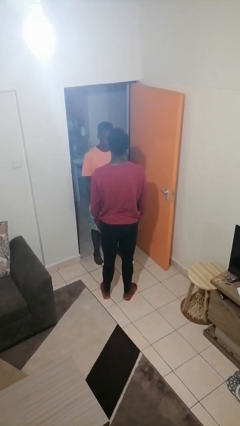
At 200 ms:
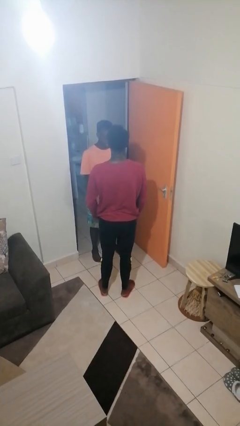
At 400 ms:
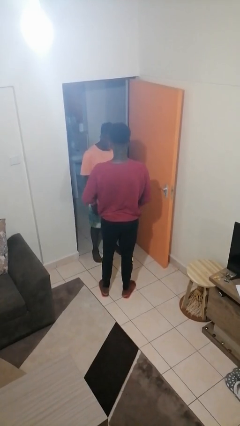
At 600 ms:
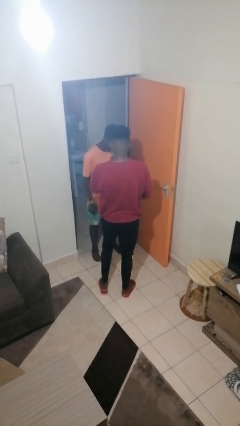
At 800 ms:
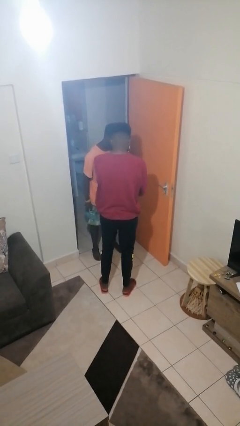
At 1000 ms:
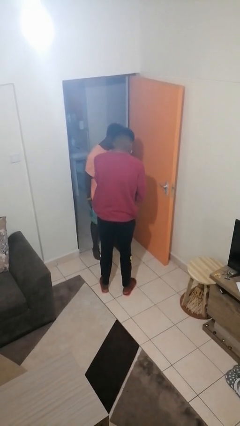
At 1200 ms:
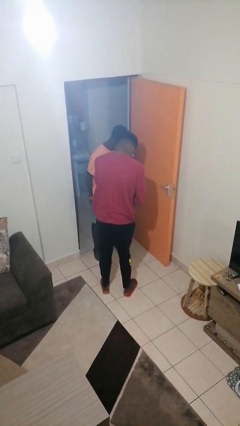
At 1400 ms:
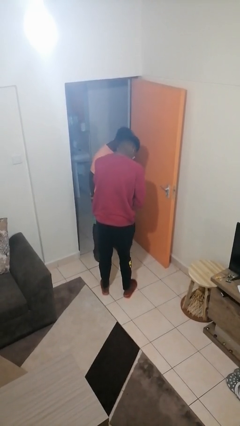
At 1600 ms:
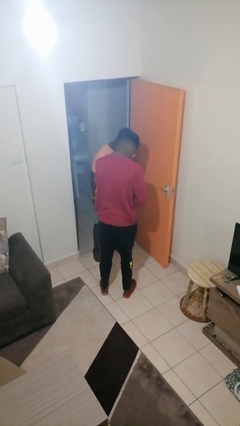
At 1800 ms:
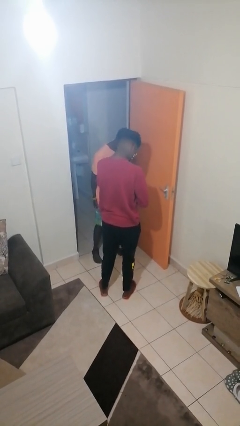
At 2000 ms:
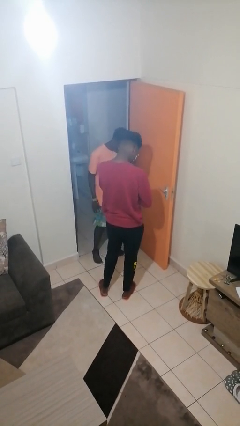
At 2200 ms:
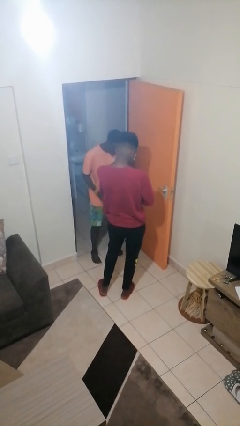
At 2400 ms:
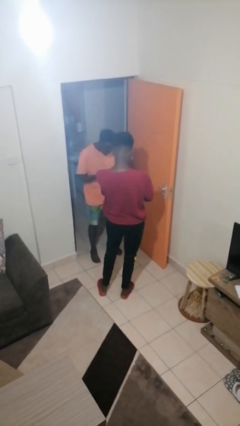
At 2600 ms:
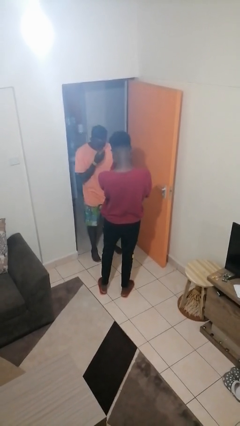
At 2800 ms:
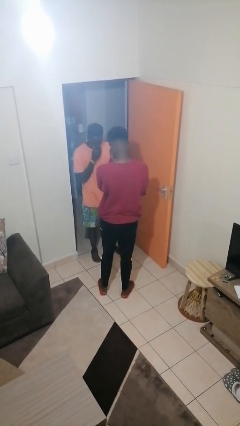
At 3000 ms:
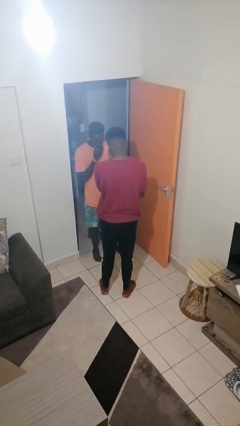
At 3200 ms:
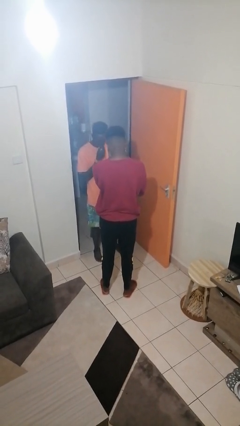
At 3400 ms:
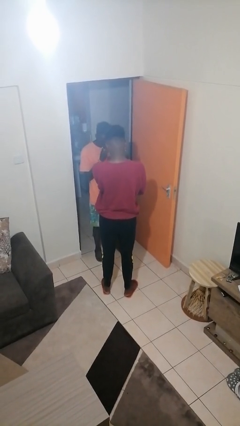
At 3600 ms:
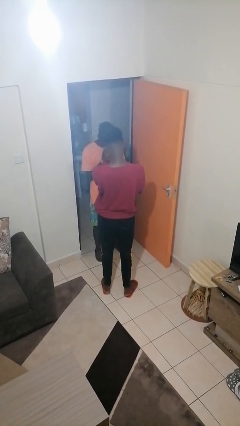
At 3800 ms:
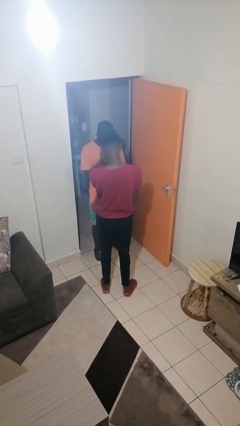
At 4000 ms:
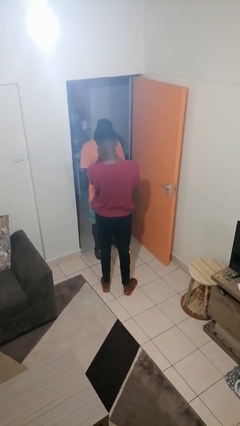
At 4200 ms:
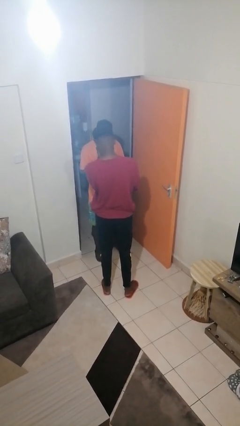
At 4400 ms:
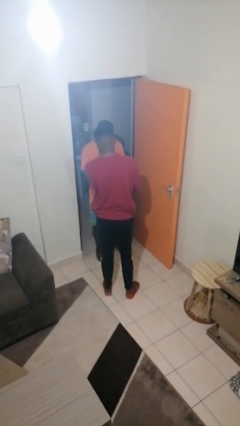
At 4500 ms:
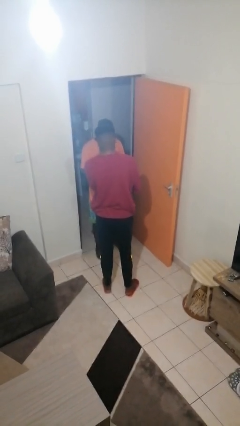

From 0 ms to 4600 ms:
person laughs with person

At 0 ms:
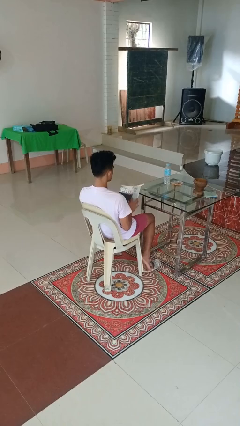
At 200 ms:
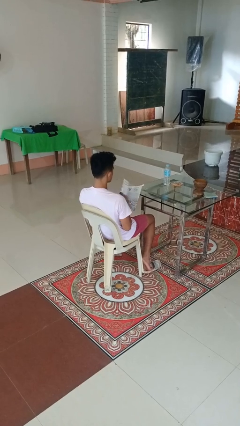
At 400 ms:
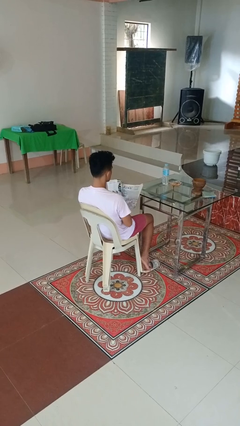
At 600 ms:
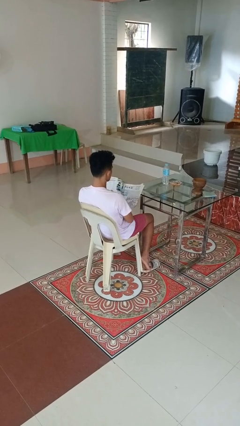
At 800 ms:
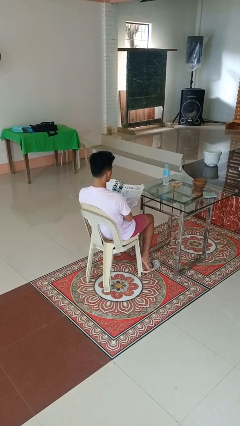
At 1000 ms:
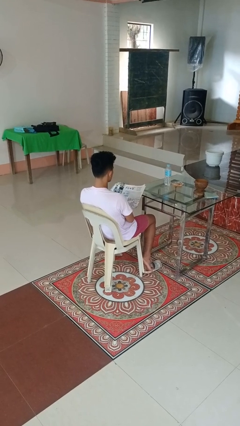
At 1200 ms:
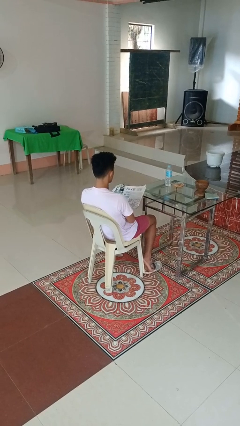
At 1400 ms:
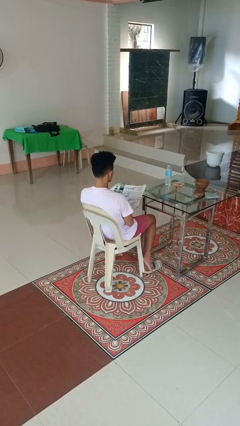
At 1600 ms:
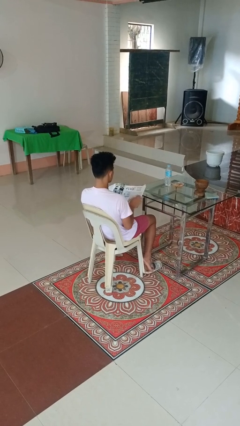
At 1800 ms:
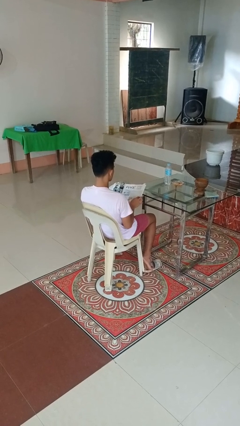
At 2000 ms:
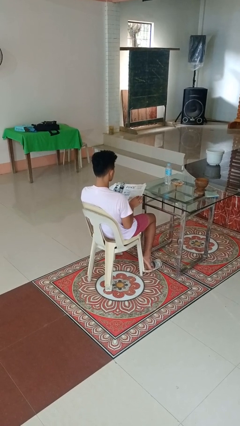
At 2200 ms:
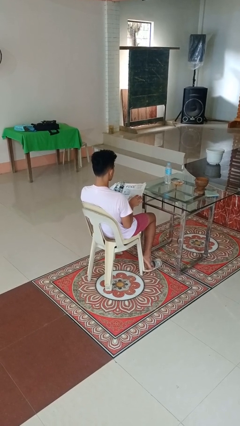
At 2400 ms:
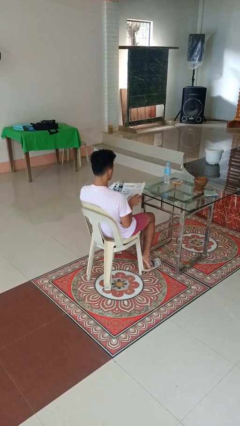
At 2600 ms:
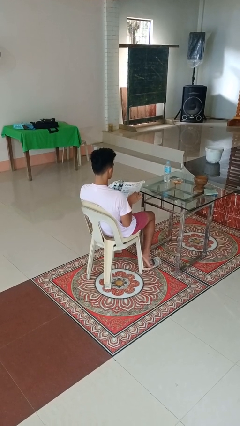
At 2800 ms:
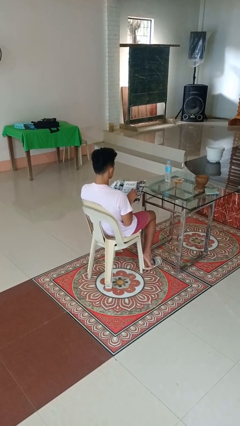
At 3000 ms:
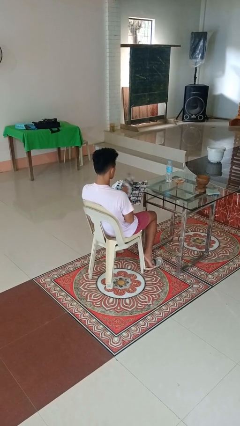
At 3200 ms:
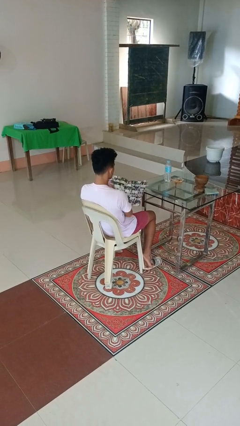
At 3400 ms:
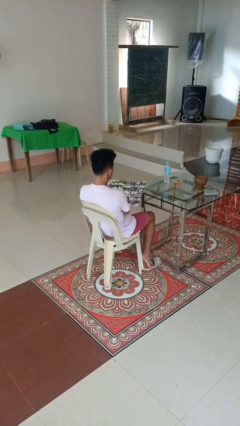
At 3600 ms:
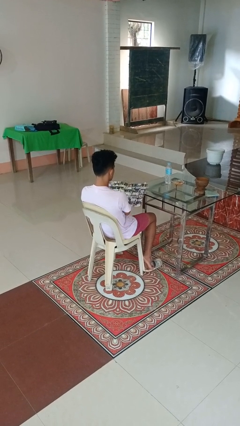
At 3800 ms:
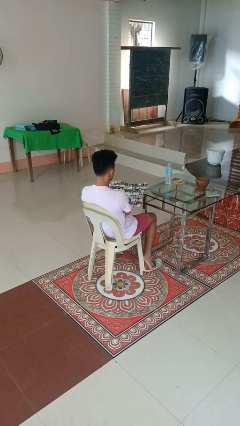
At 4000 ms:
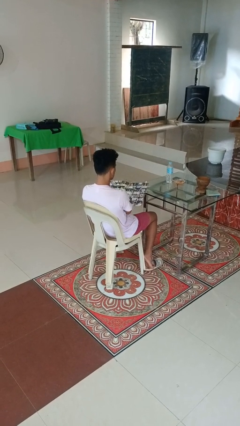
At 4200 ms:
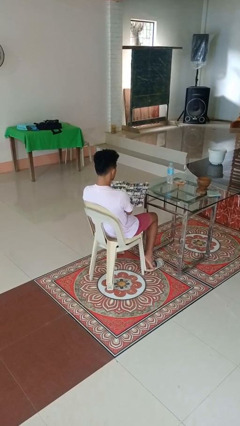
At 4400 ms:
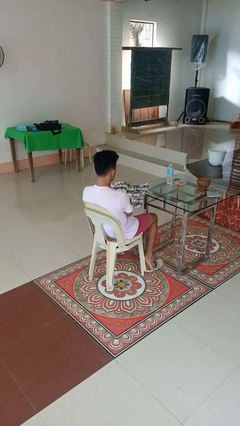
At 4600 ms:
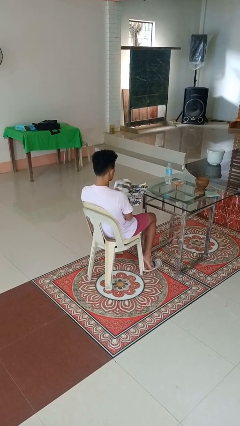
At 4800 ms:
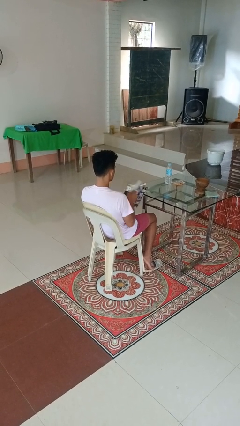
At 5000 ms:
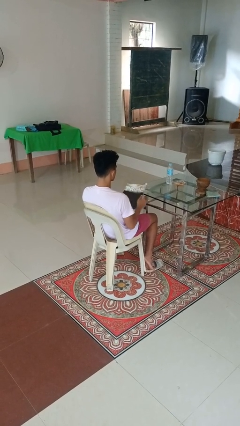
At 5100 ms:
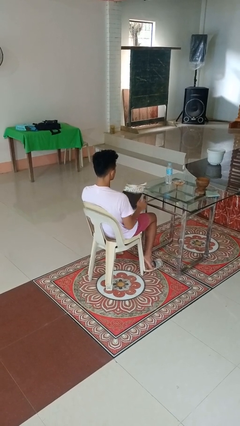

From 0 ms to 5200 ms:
person reads magazine

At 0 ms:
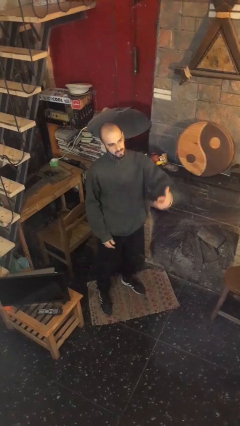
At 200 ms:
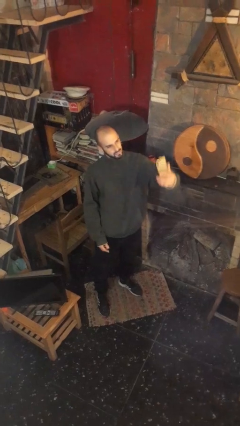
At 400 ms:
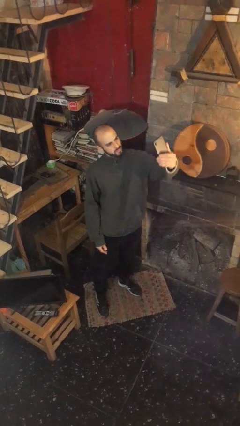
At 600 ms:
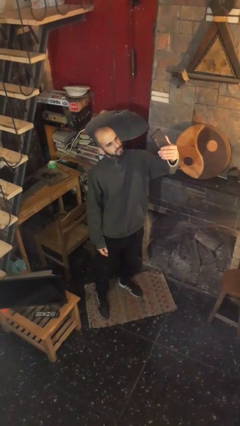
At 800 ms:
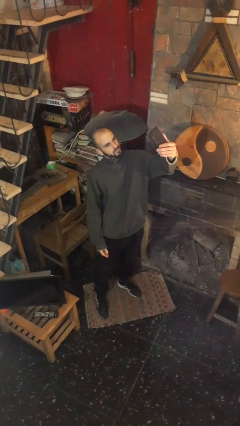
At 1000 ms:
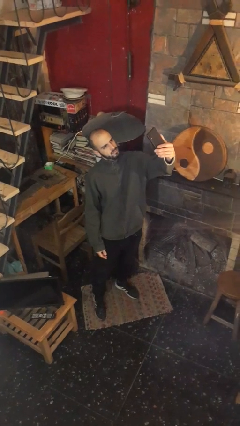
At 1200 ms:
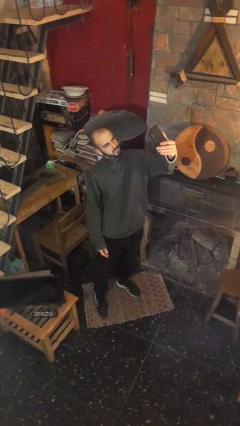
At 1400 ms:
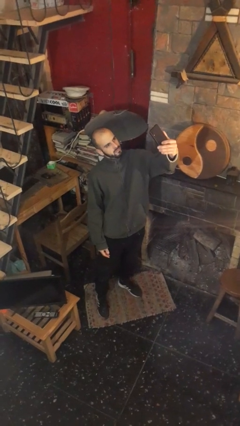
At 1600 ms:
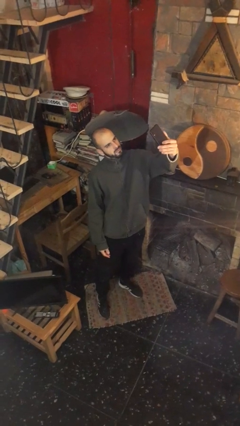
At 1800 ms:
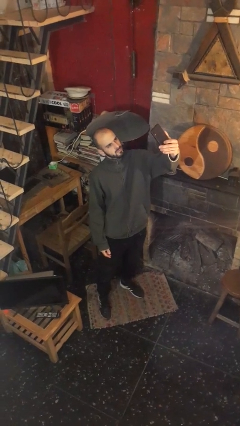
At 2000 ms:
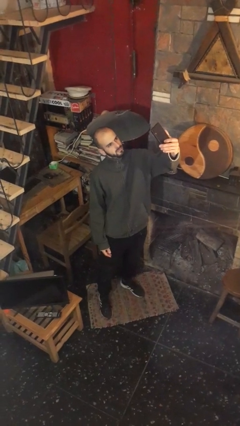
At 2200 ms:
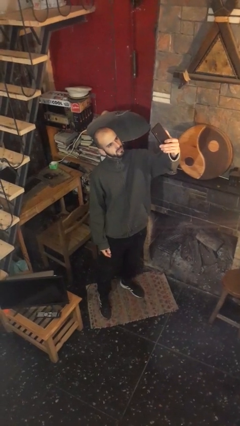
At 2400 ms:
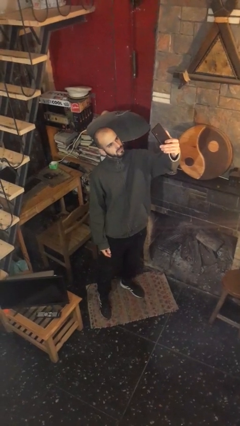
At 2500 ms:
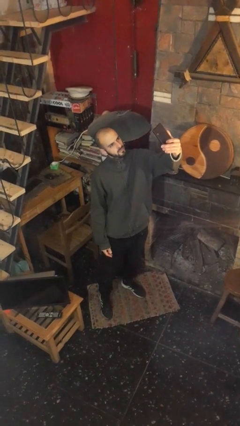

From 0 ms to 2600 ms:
person takes selfie

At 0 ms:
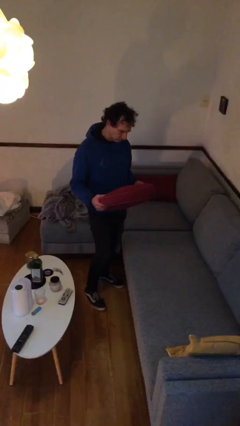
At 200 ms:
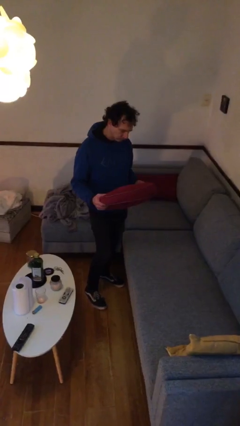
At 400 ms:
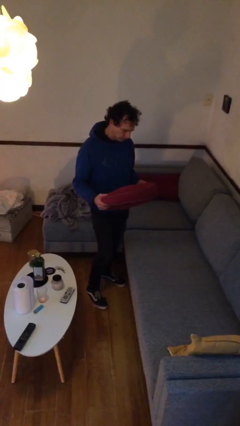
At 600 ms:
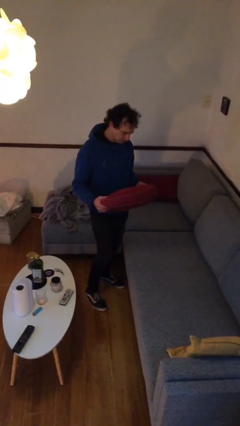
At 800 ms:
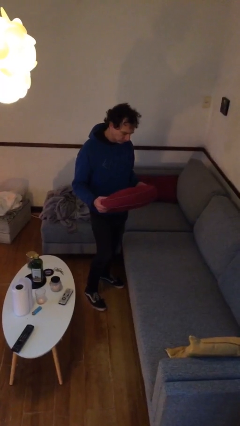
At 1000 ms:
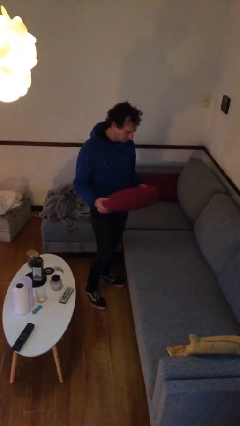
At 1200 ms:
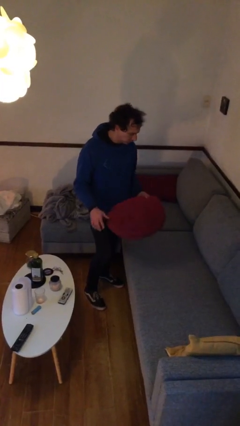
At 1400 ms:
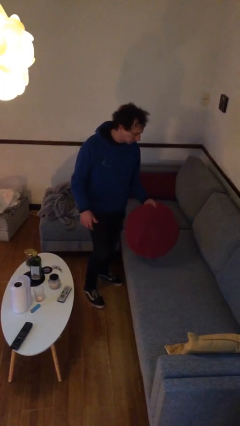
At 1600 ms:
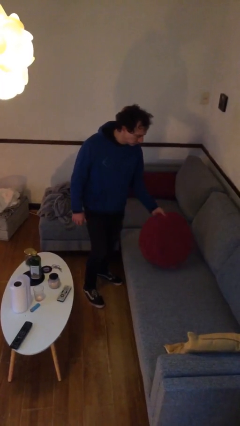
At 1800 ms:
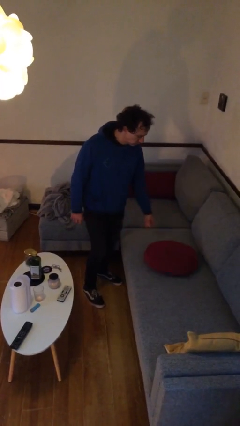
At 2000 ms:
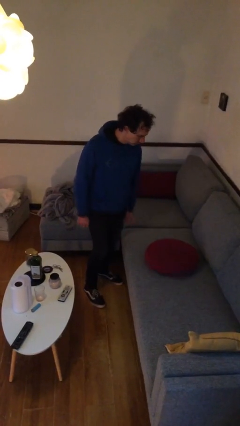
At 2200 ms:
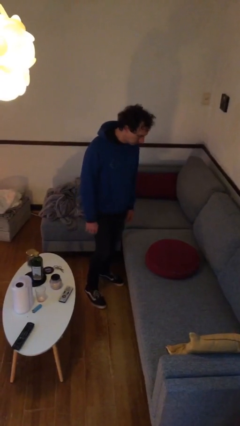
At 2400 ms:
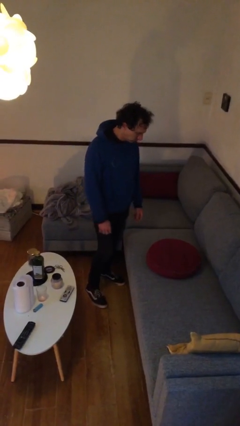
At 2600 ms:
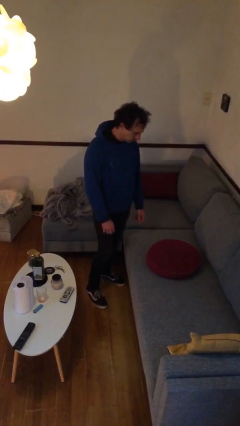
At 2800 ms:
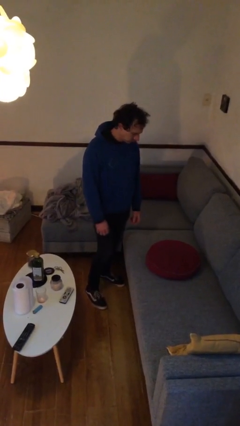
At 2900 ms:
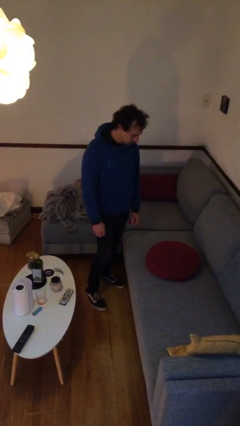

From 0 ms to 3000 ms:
person puts down object on couch

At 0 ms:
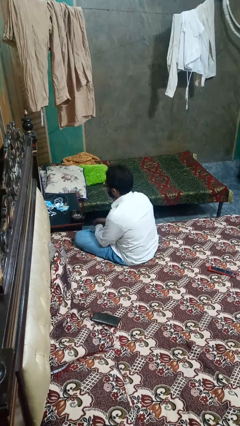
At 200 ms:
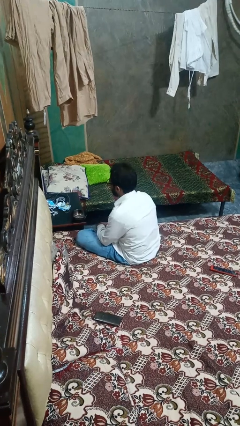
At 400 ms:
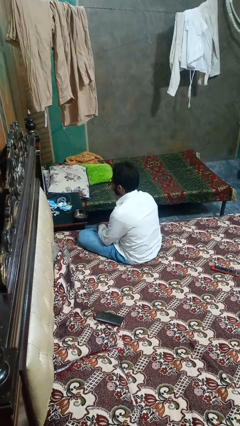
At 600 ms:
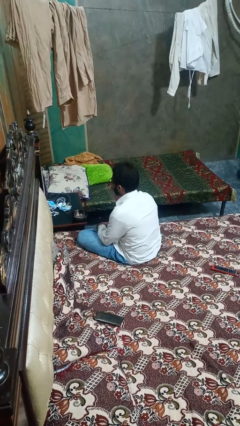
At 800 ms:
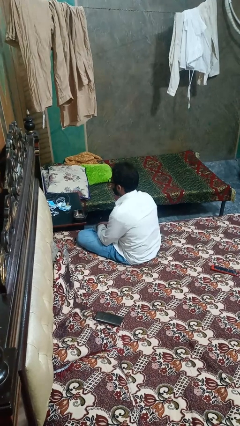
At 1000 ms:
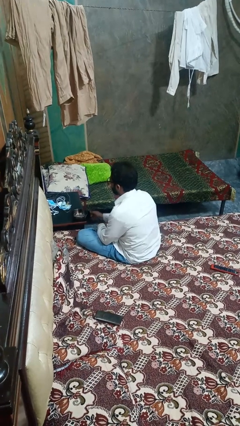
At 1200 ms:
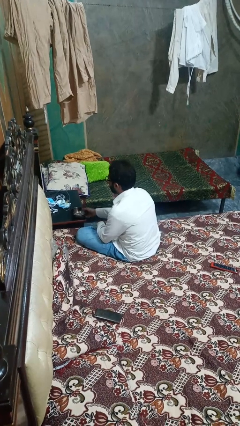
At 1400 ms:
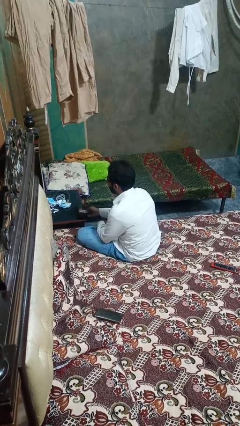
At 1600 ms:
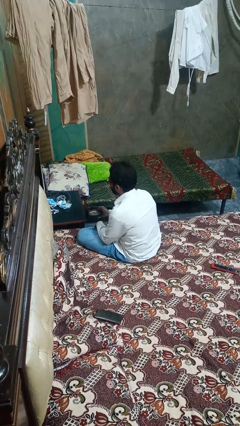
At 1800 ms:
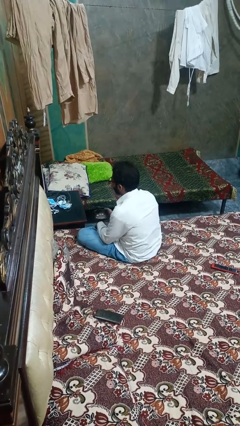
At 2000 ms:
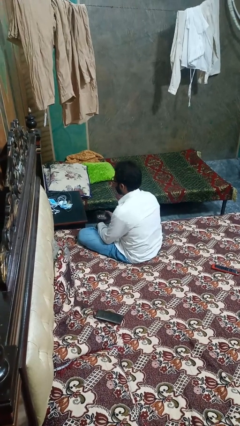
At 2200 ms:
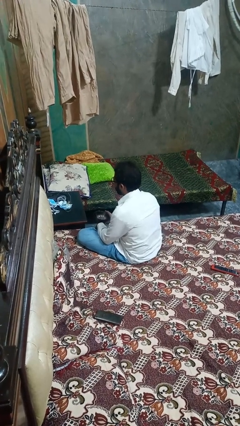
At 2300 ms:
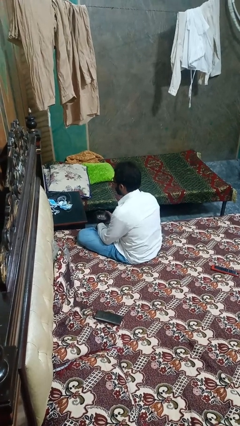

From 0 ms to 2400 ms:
person picks up object from table
